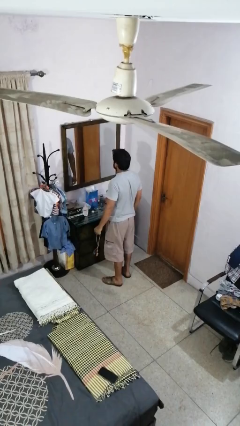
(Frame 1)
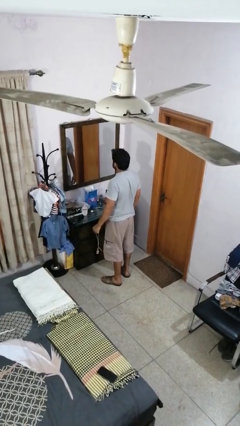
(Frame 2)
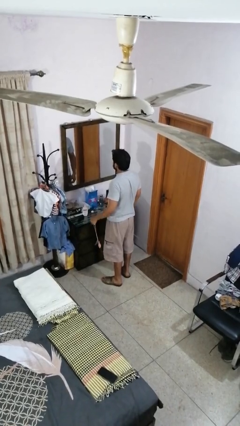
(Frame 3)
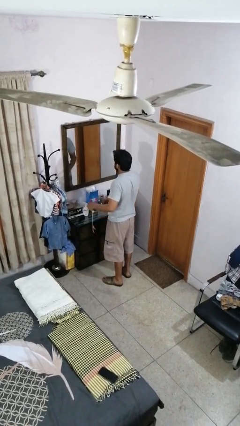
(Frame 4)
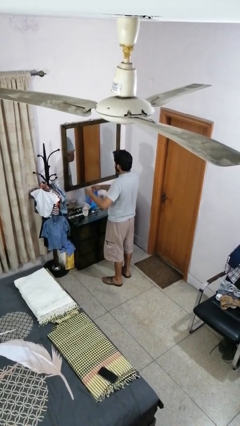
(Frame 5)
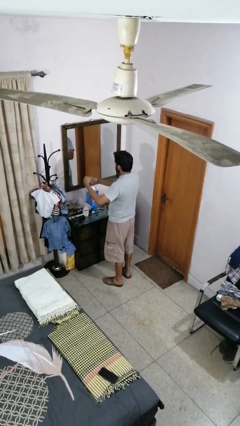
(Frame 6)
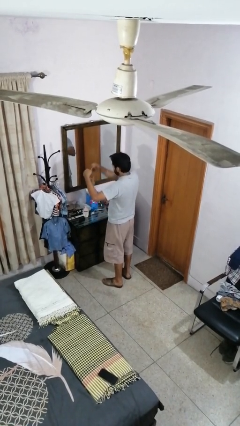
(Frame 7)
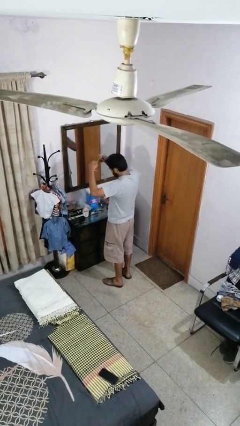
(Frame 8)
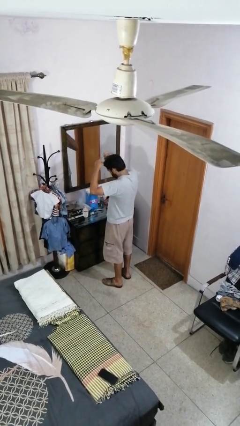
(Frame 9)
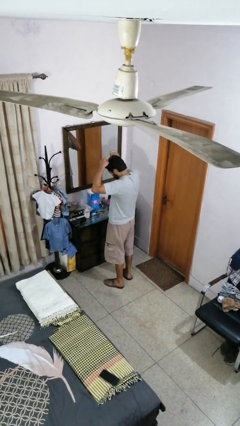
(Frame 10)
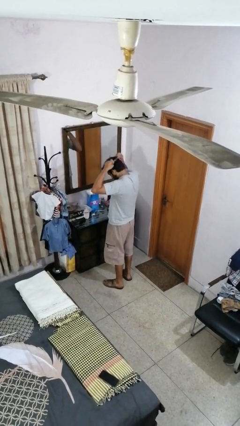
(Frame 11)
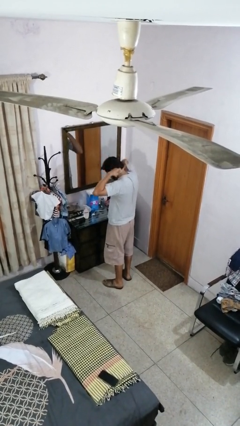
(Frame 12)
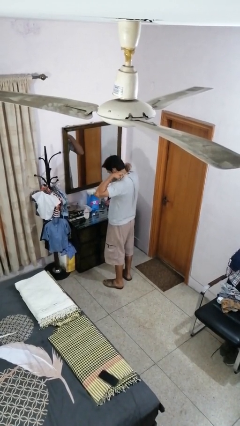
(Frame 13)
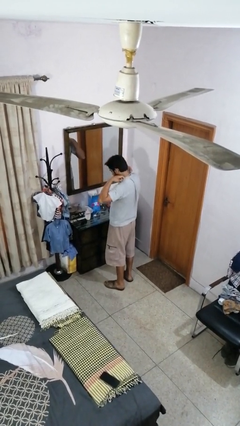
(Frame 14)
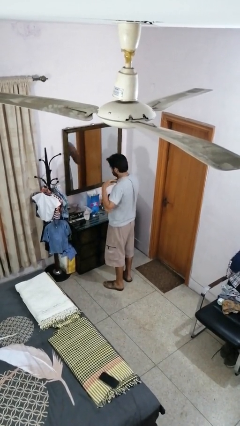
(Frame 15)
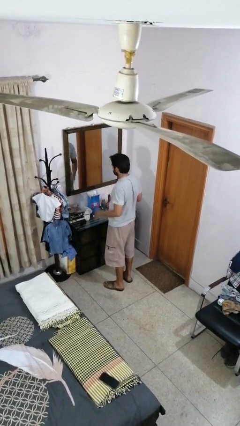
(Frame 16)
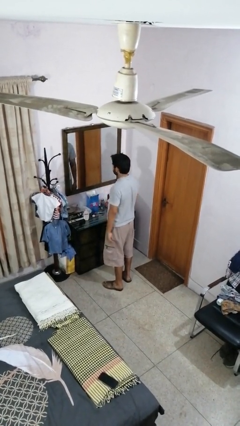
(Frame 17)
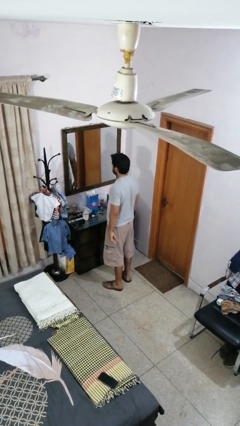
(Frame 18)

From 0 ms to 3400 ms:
person puts on necklace

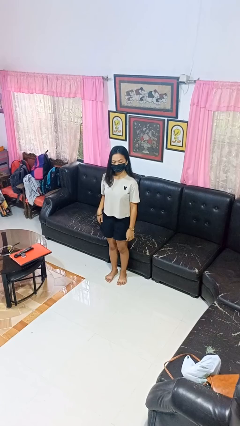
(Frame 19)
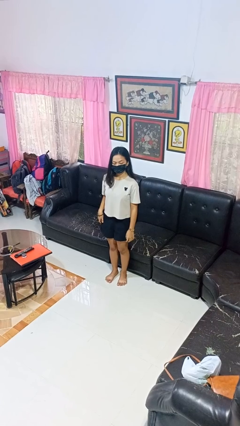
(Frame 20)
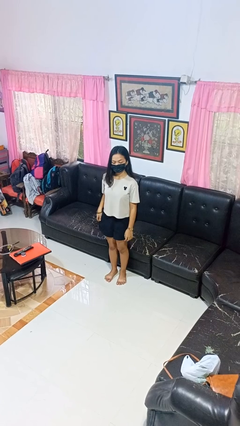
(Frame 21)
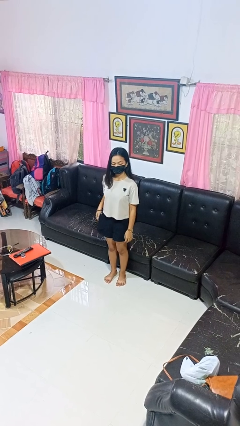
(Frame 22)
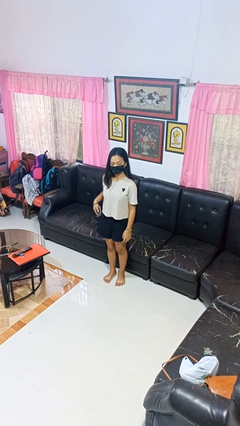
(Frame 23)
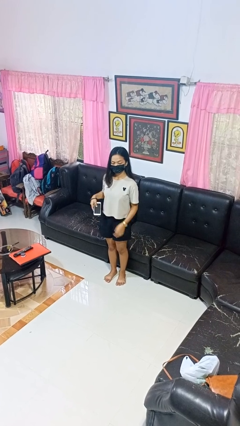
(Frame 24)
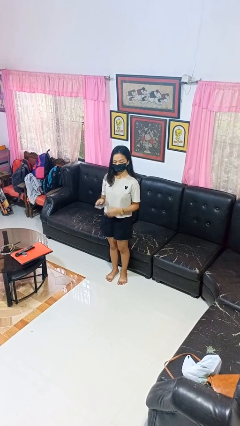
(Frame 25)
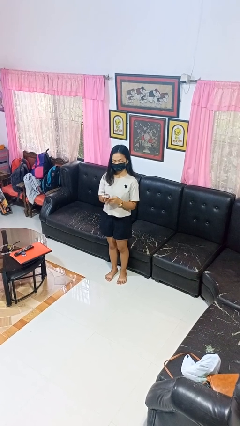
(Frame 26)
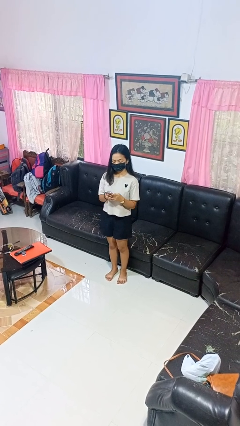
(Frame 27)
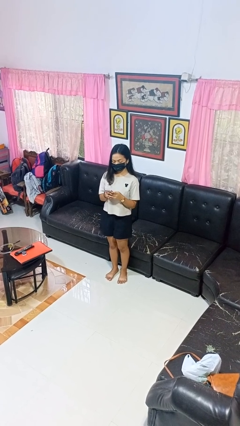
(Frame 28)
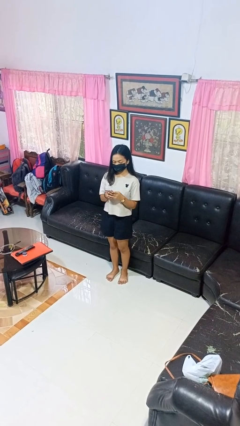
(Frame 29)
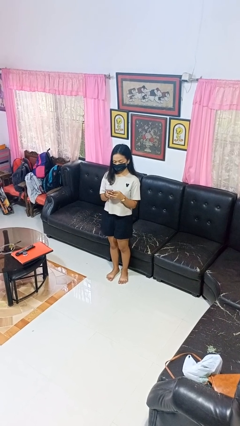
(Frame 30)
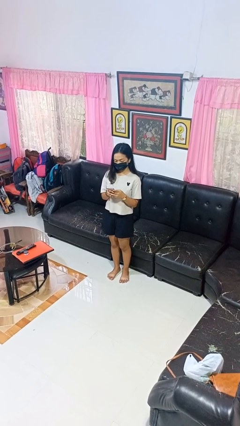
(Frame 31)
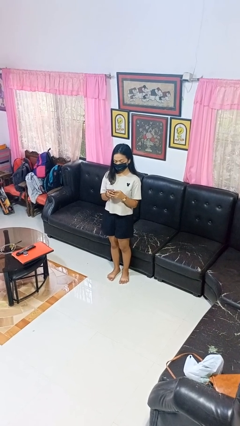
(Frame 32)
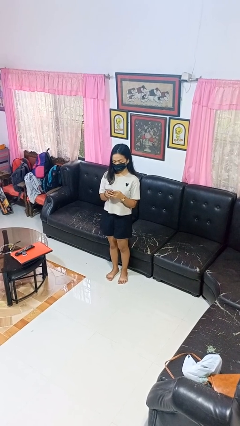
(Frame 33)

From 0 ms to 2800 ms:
person takes phone from pocket

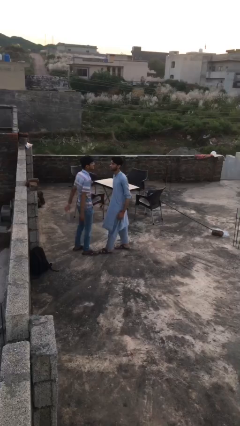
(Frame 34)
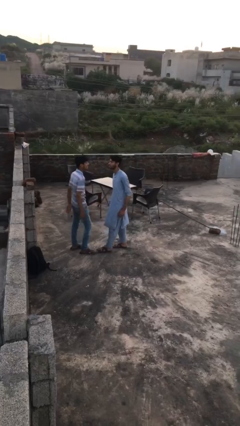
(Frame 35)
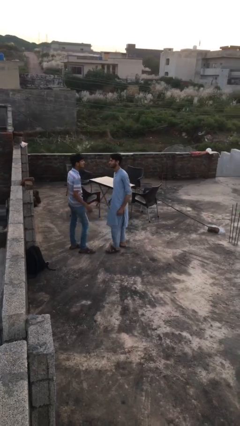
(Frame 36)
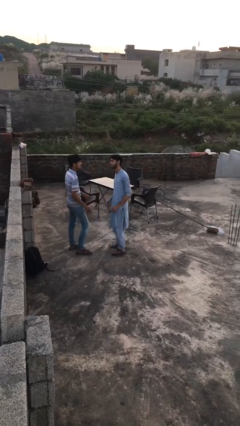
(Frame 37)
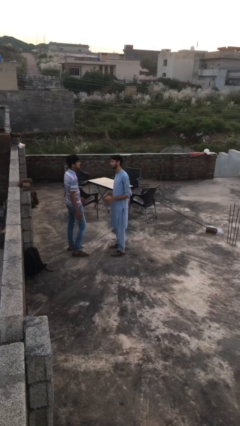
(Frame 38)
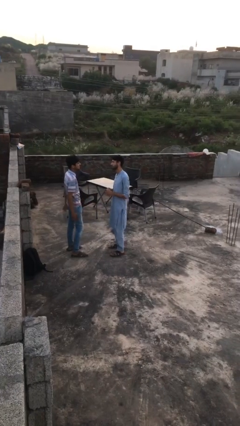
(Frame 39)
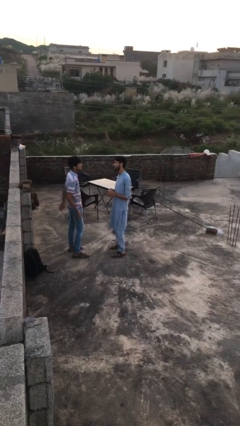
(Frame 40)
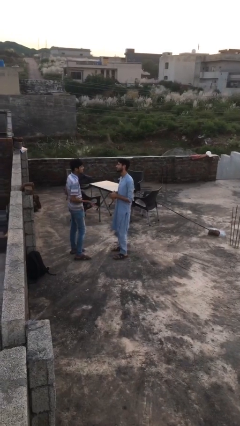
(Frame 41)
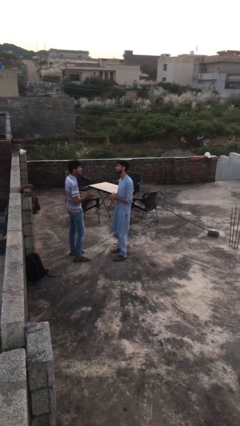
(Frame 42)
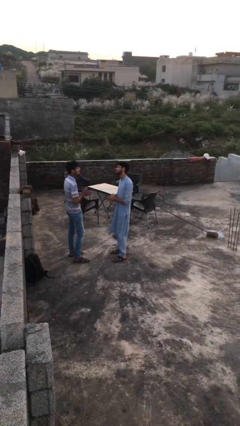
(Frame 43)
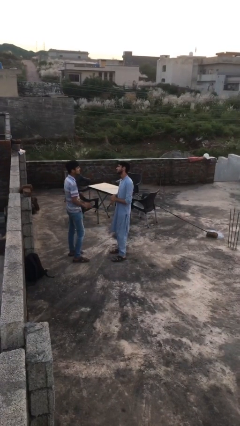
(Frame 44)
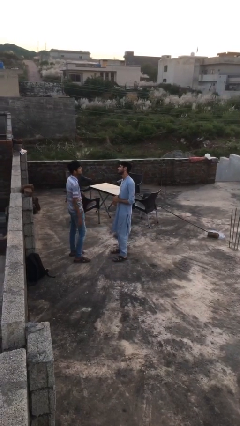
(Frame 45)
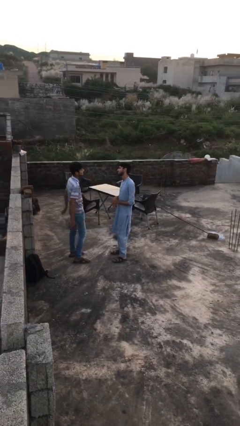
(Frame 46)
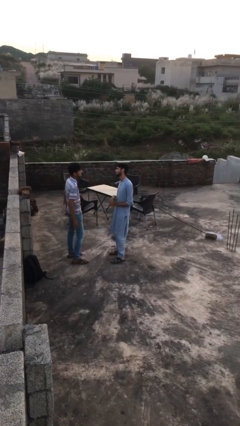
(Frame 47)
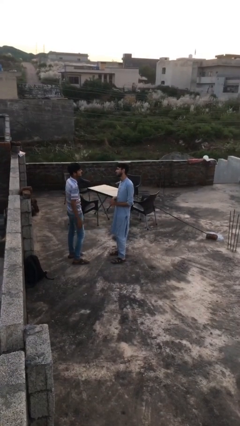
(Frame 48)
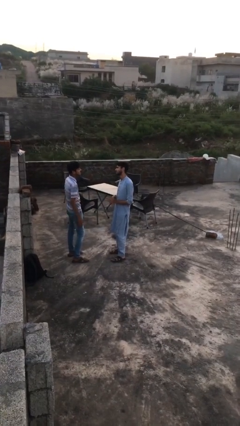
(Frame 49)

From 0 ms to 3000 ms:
person talks to person

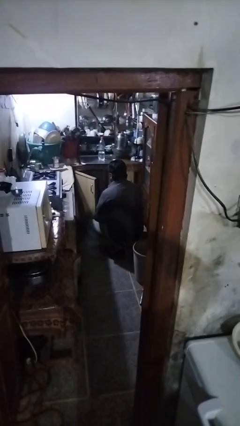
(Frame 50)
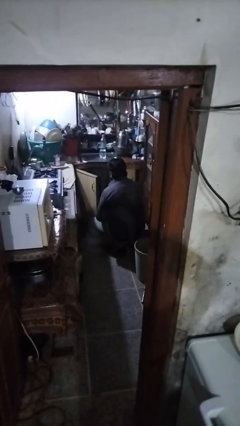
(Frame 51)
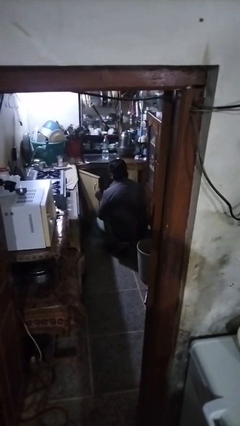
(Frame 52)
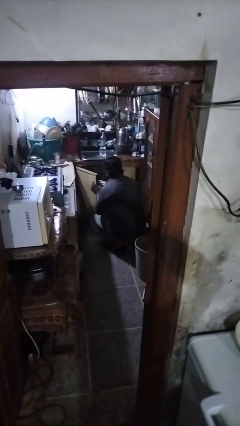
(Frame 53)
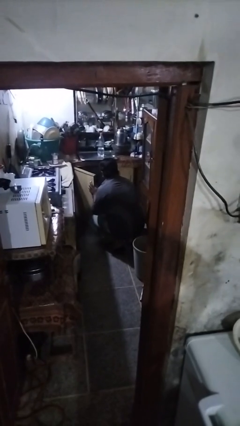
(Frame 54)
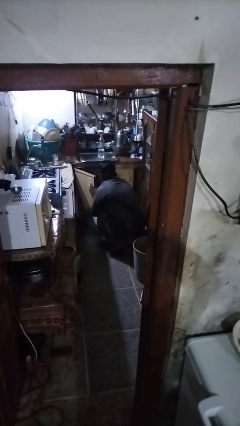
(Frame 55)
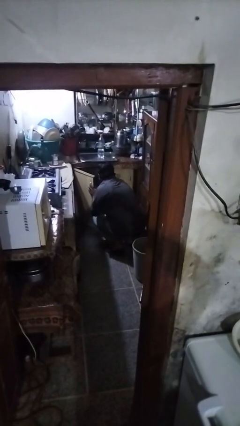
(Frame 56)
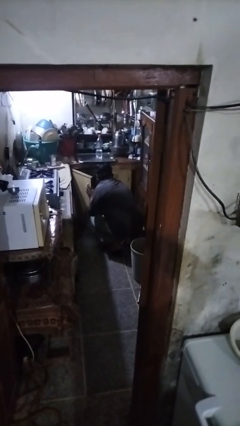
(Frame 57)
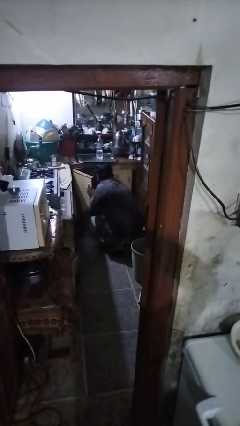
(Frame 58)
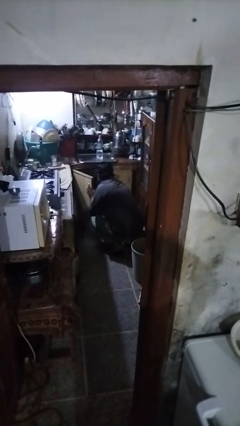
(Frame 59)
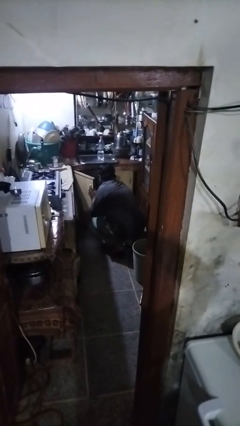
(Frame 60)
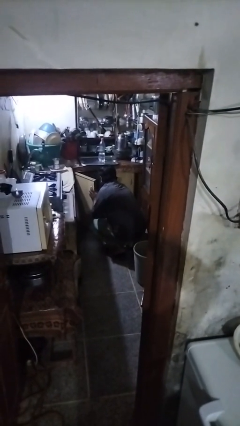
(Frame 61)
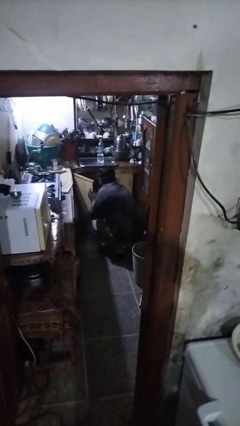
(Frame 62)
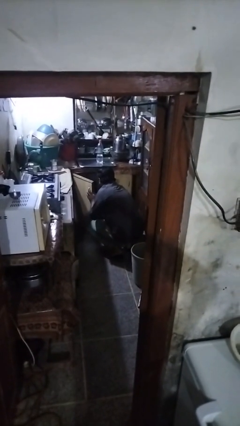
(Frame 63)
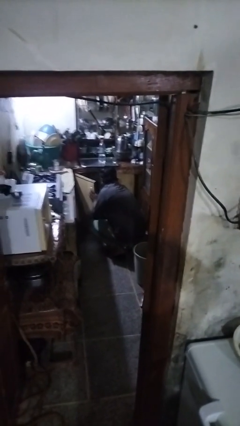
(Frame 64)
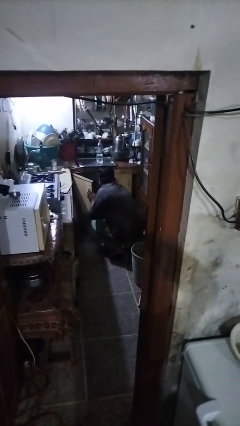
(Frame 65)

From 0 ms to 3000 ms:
person puts object in cabinet

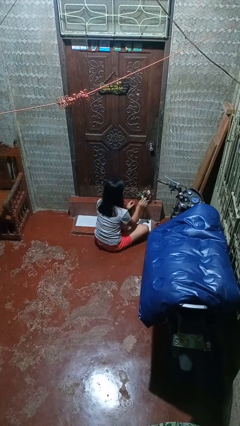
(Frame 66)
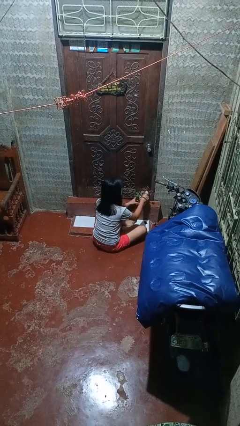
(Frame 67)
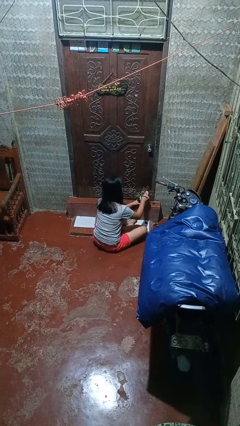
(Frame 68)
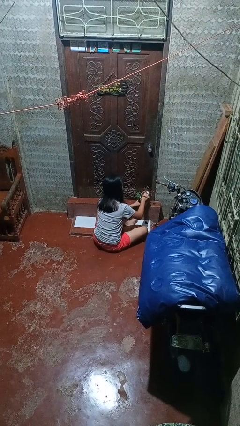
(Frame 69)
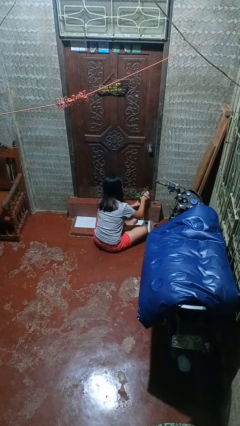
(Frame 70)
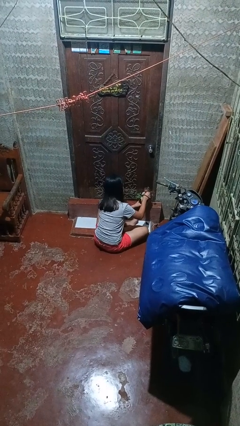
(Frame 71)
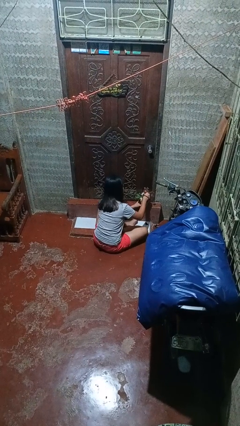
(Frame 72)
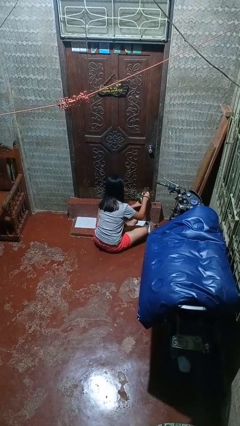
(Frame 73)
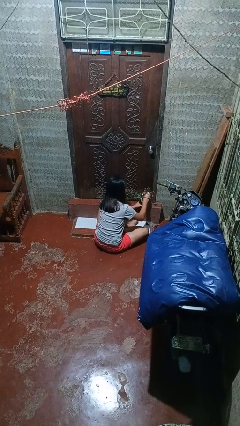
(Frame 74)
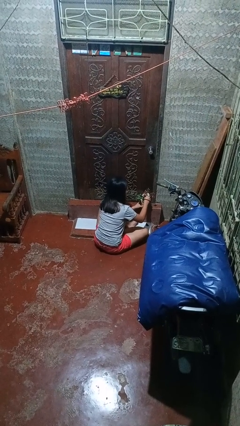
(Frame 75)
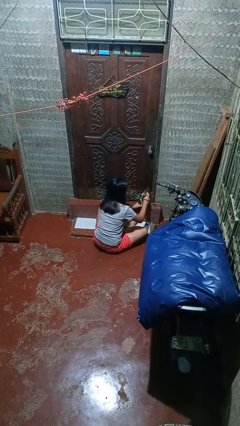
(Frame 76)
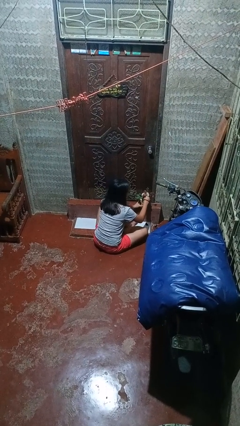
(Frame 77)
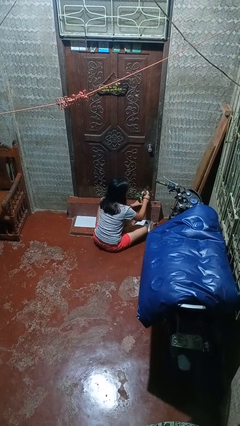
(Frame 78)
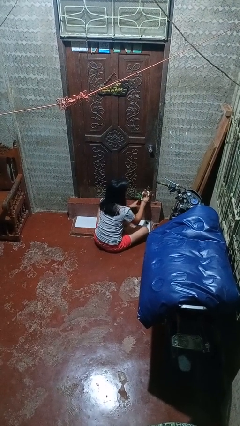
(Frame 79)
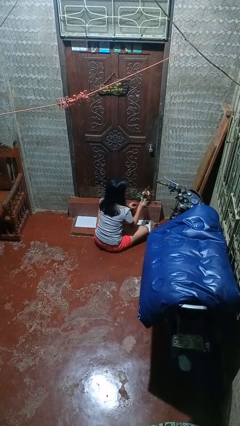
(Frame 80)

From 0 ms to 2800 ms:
person arranges flowers in vase

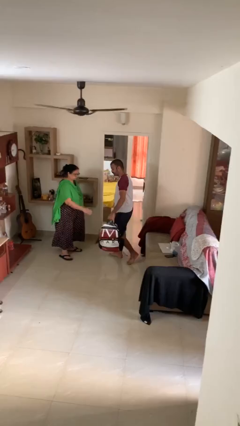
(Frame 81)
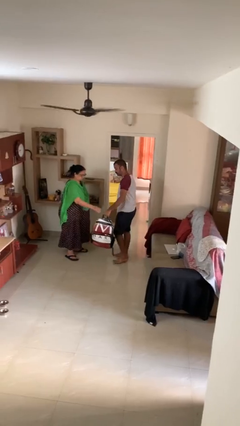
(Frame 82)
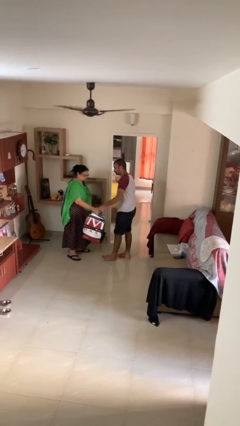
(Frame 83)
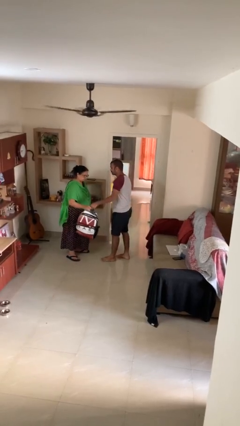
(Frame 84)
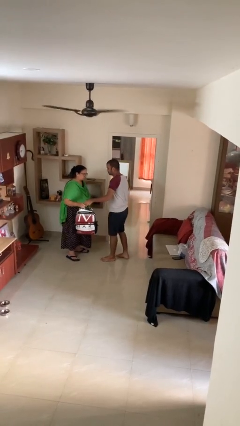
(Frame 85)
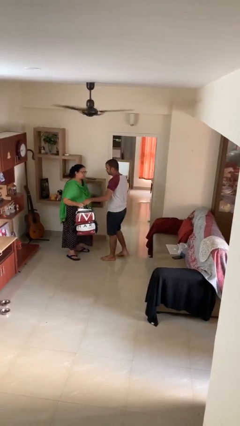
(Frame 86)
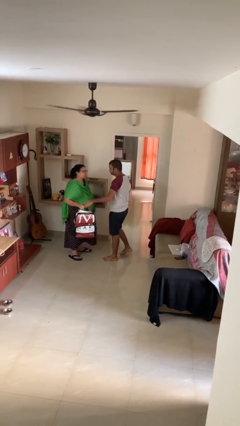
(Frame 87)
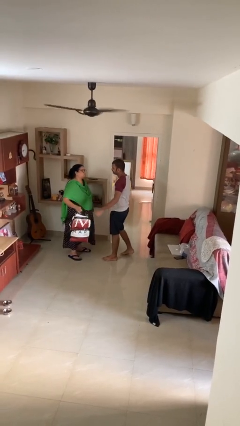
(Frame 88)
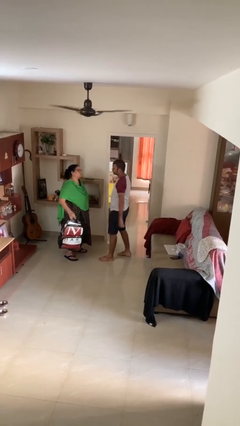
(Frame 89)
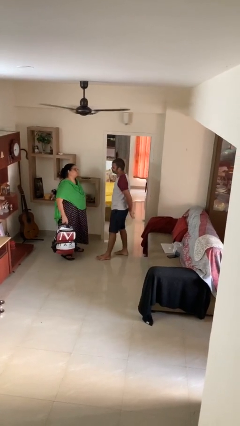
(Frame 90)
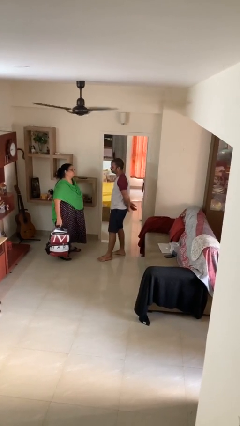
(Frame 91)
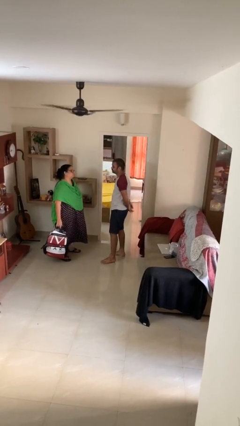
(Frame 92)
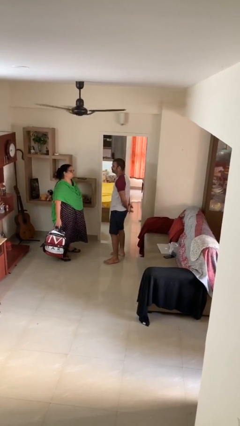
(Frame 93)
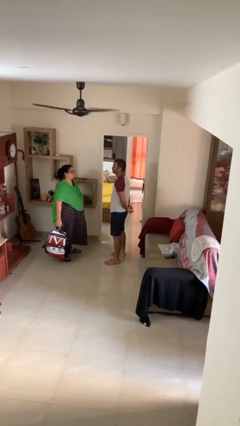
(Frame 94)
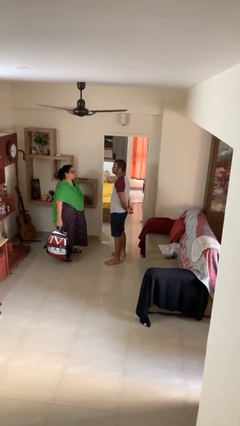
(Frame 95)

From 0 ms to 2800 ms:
person transfers object to person
